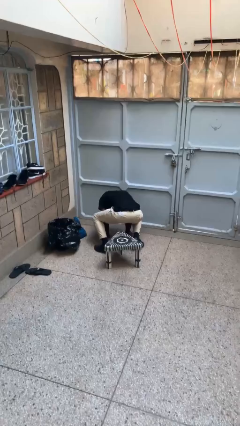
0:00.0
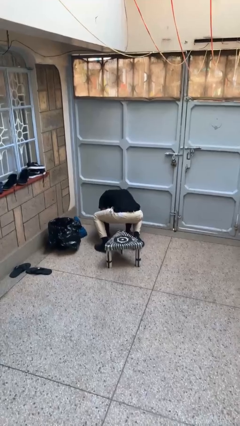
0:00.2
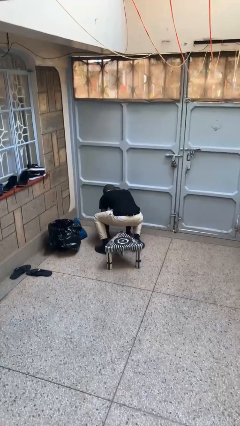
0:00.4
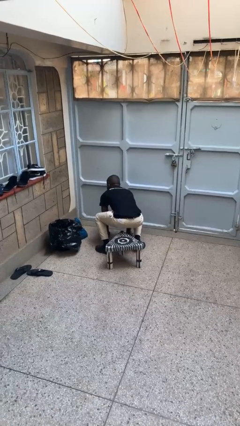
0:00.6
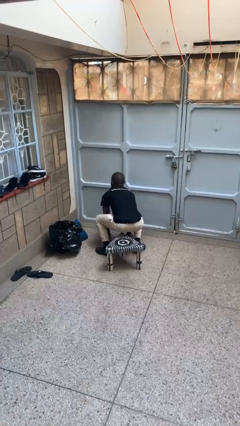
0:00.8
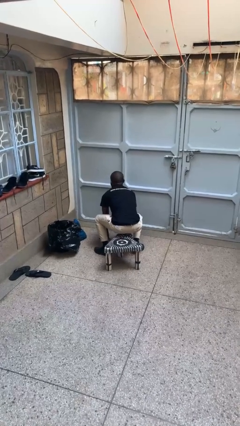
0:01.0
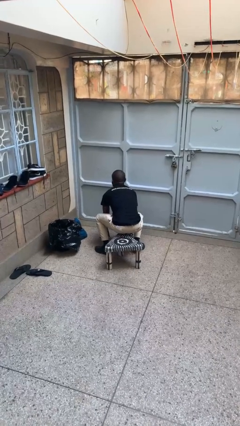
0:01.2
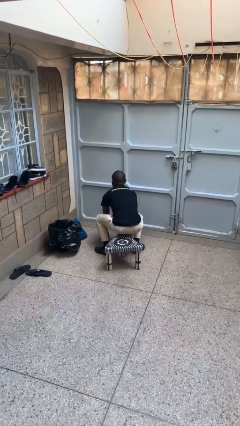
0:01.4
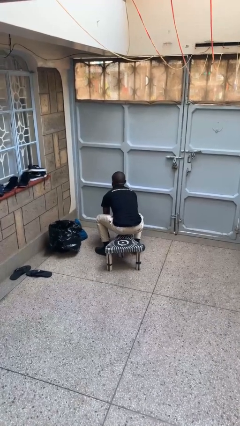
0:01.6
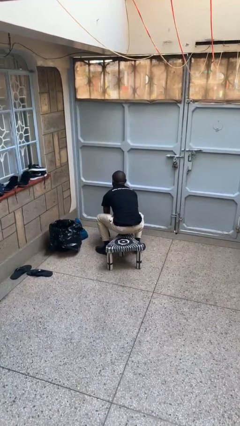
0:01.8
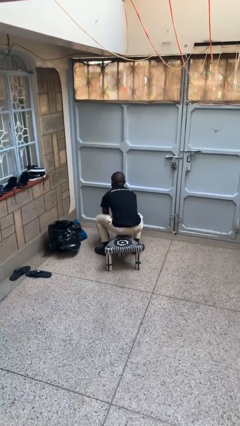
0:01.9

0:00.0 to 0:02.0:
person stands up from floor

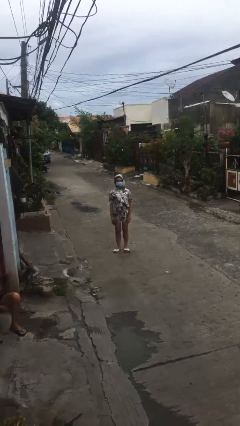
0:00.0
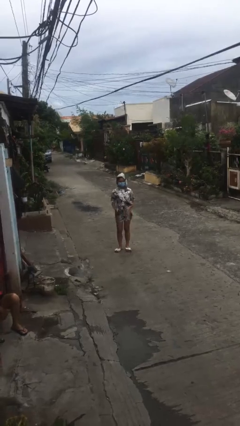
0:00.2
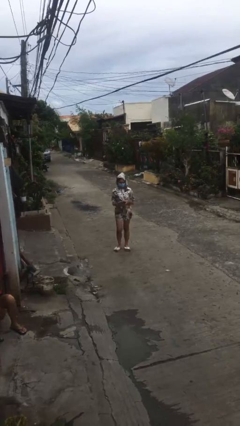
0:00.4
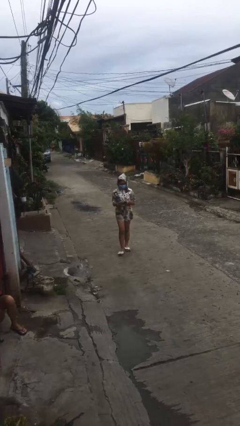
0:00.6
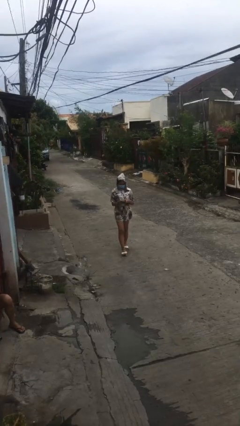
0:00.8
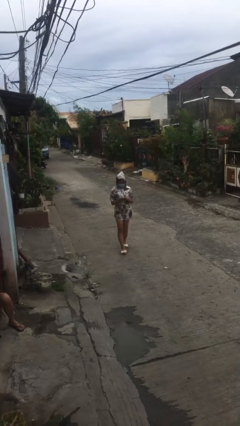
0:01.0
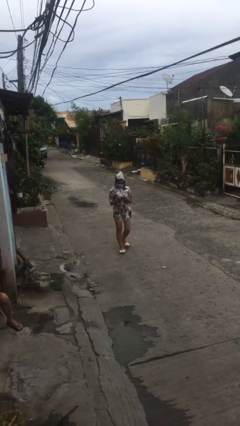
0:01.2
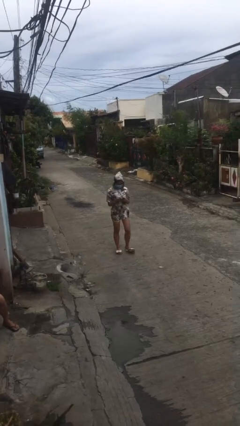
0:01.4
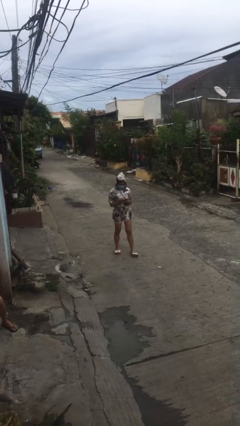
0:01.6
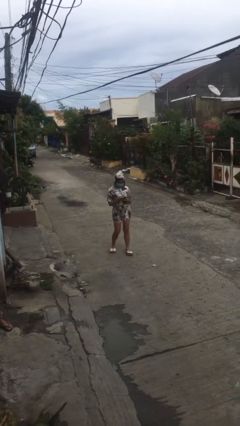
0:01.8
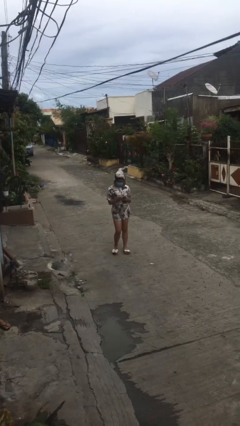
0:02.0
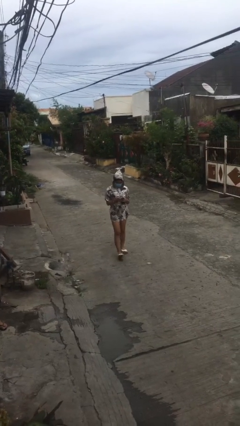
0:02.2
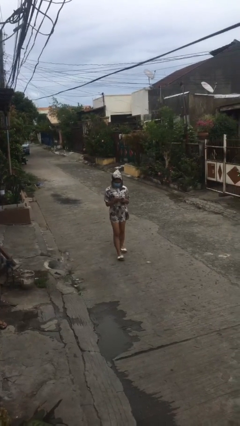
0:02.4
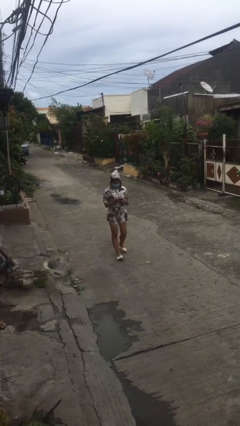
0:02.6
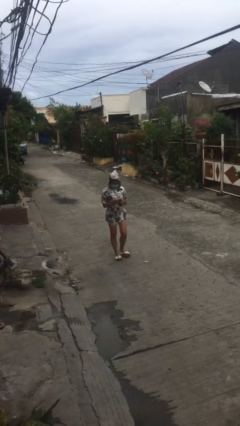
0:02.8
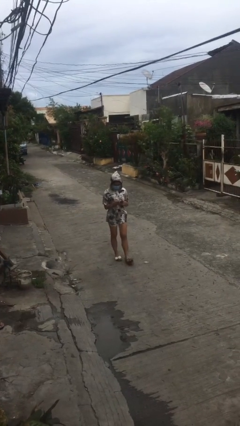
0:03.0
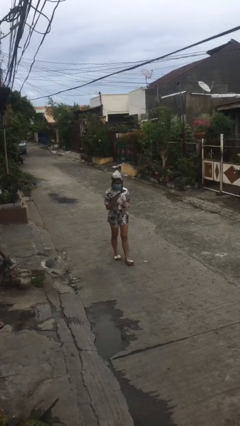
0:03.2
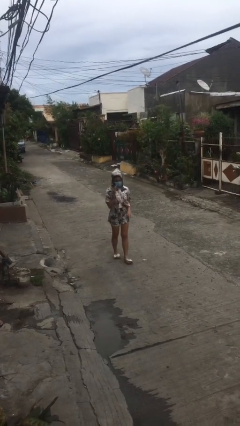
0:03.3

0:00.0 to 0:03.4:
person texts on phone

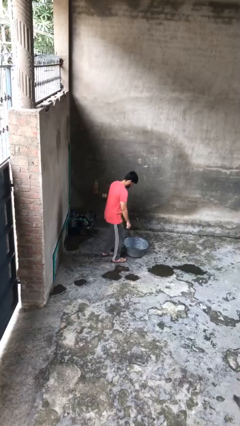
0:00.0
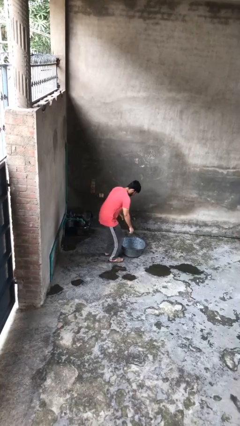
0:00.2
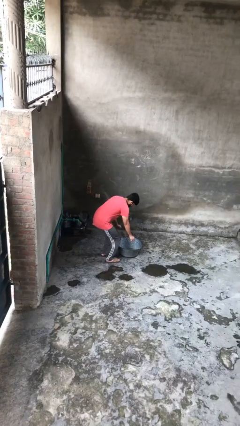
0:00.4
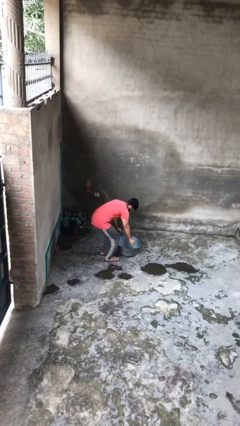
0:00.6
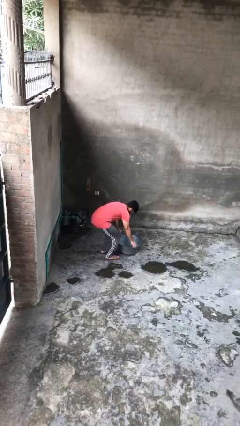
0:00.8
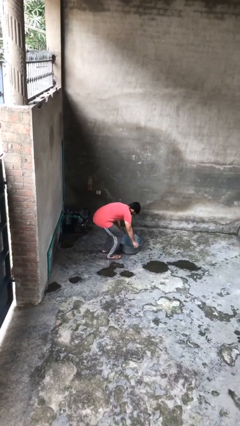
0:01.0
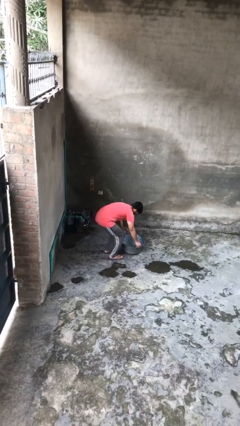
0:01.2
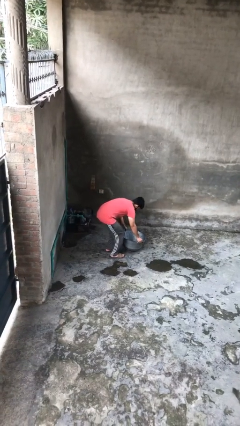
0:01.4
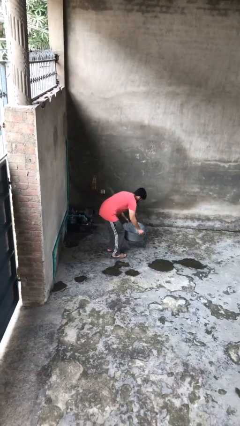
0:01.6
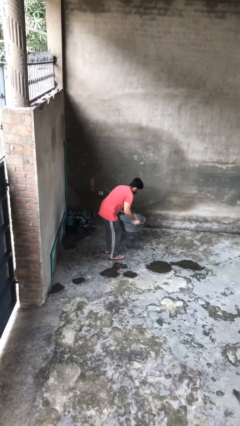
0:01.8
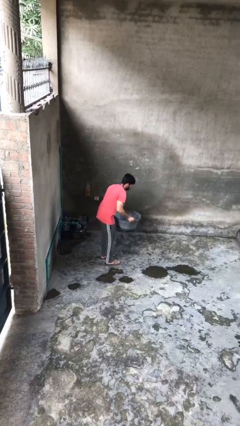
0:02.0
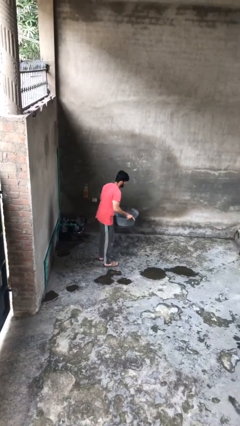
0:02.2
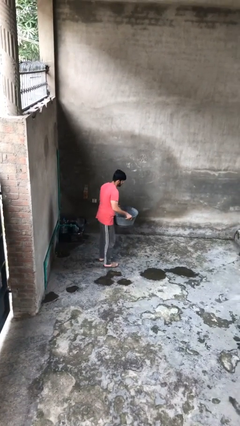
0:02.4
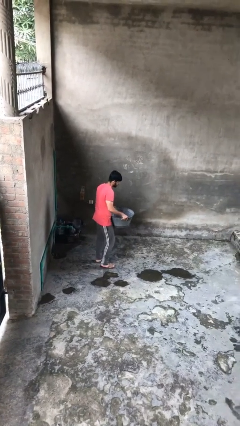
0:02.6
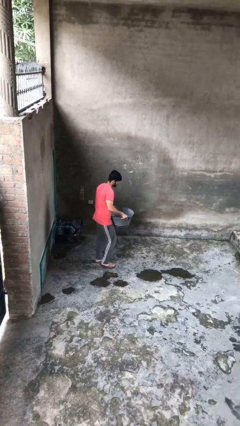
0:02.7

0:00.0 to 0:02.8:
person picks up object from floor

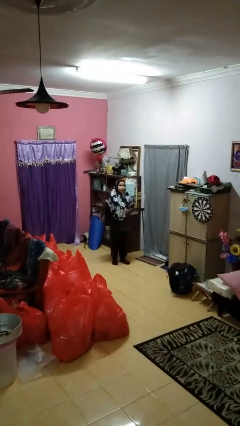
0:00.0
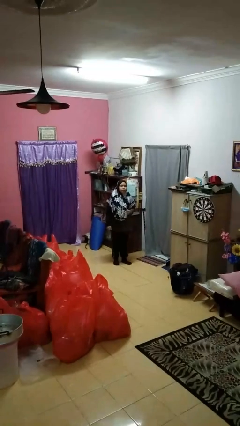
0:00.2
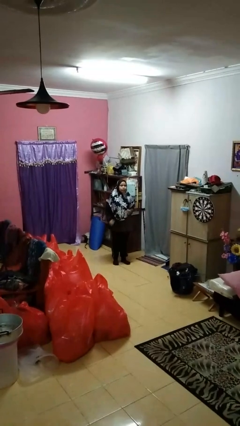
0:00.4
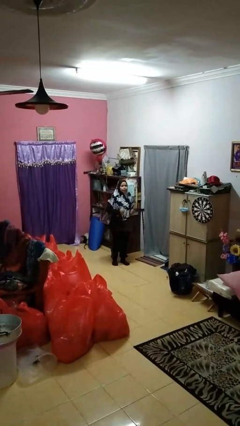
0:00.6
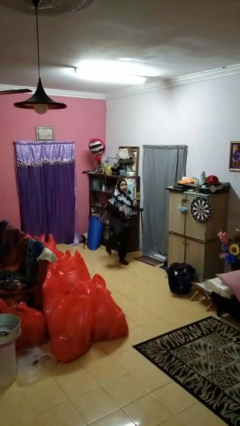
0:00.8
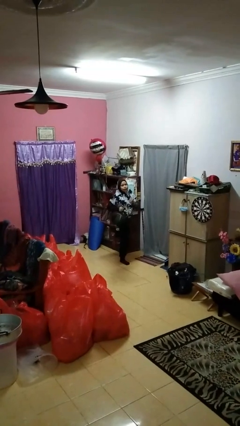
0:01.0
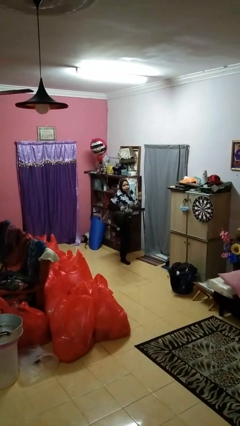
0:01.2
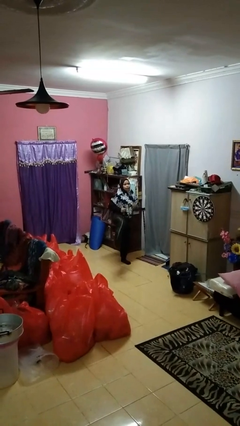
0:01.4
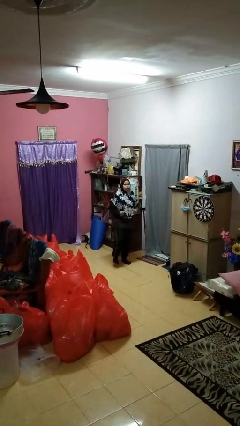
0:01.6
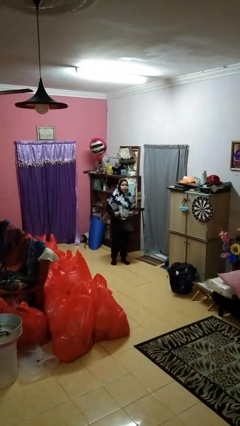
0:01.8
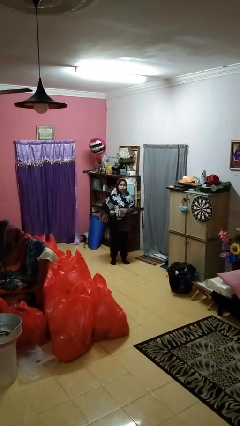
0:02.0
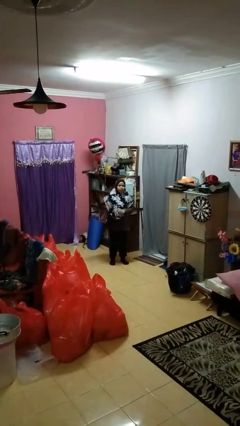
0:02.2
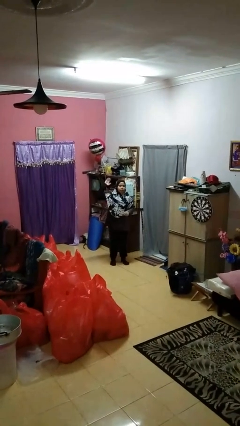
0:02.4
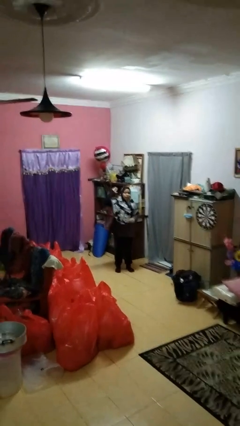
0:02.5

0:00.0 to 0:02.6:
person karate kicks

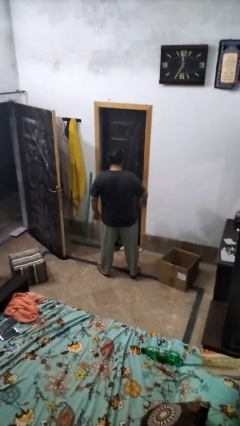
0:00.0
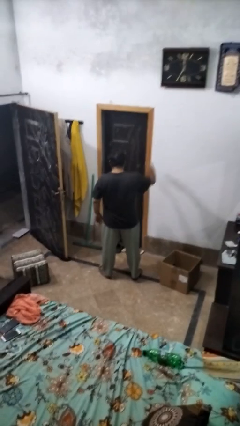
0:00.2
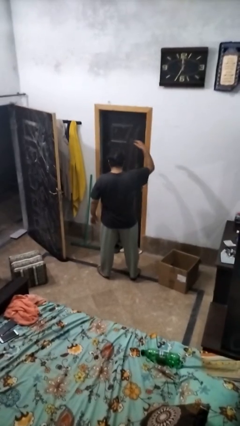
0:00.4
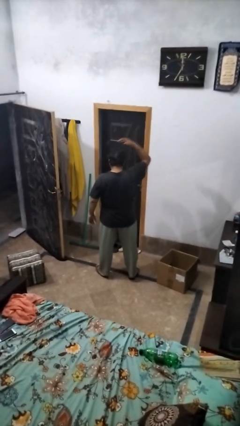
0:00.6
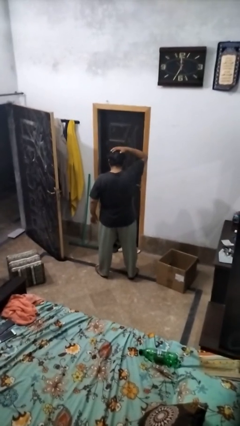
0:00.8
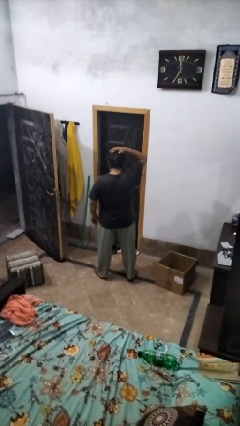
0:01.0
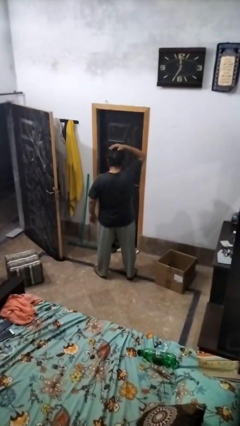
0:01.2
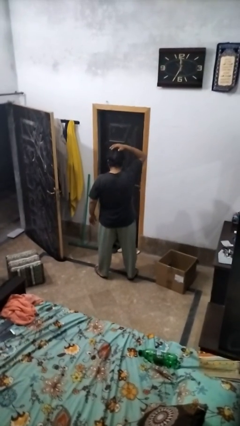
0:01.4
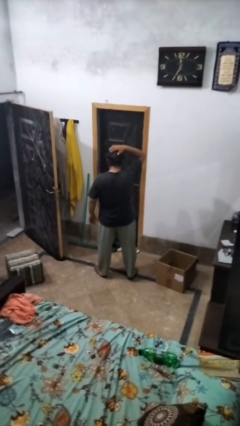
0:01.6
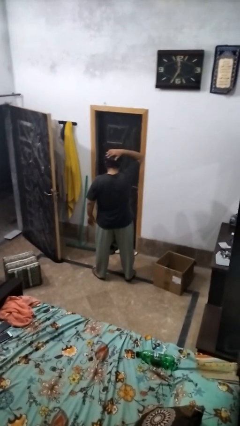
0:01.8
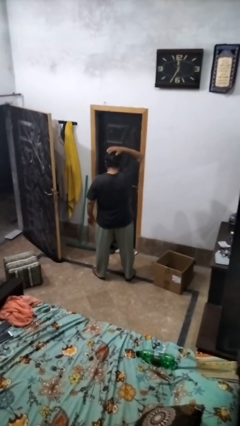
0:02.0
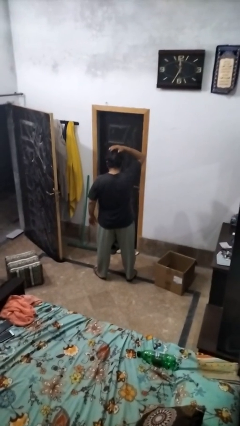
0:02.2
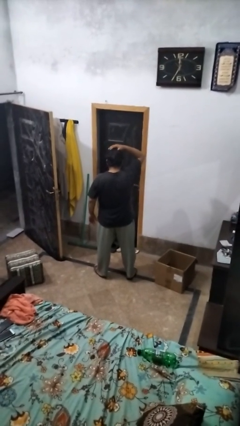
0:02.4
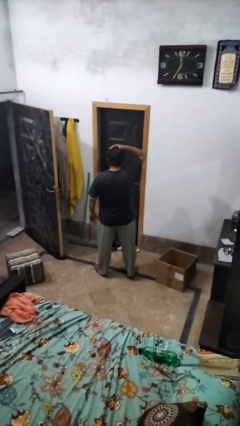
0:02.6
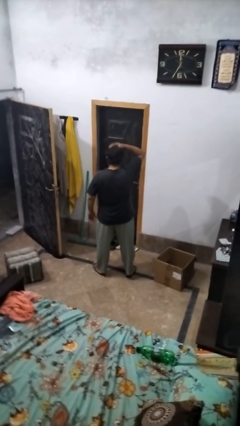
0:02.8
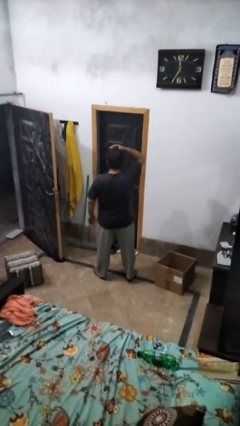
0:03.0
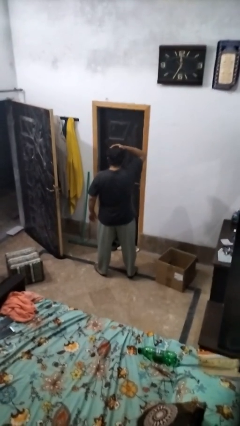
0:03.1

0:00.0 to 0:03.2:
person pats head

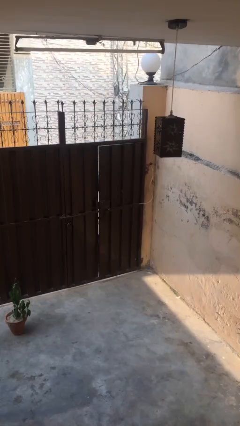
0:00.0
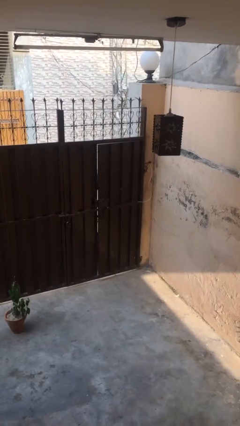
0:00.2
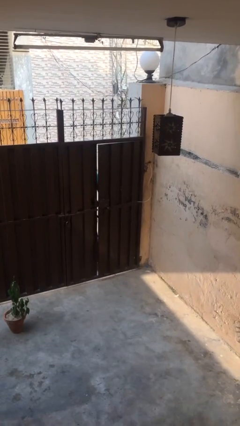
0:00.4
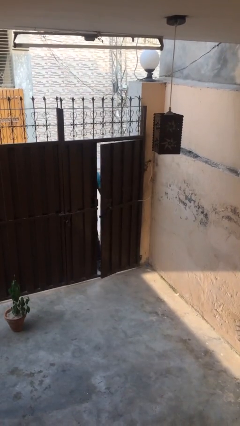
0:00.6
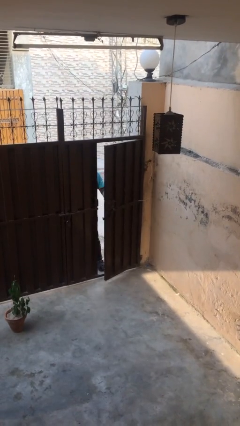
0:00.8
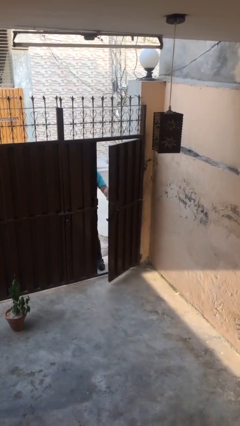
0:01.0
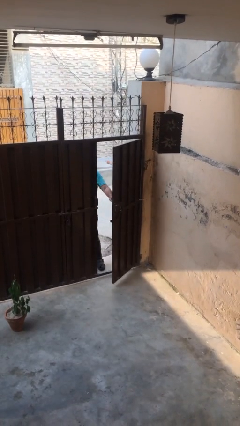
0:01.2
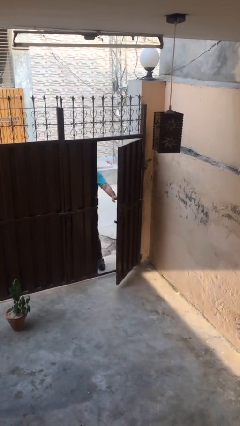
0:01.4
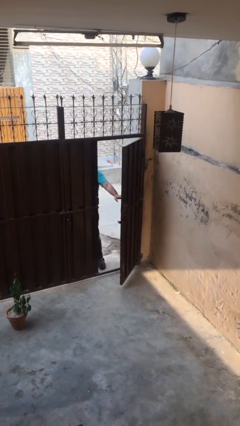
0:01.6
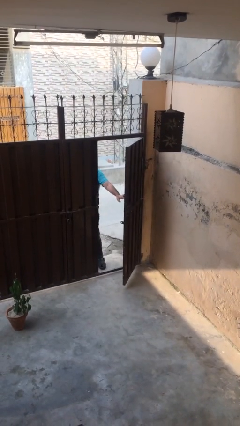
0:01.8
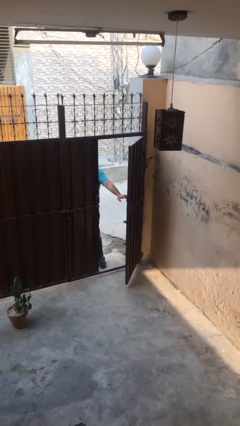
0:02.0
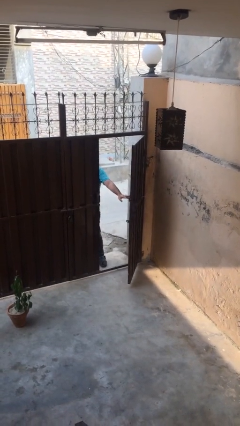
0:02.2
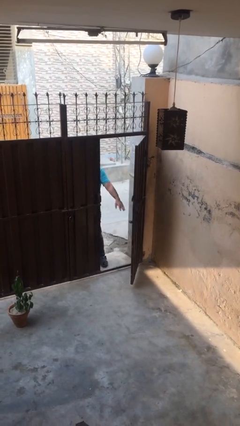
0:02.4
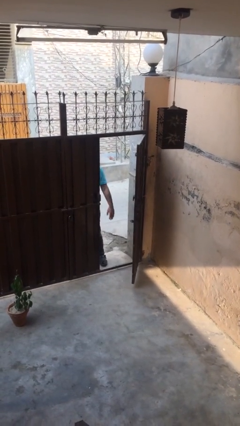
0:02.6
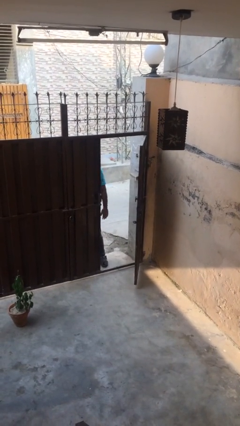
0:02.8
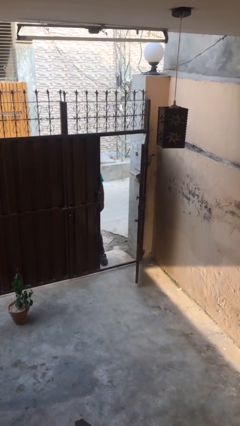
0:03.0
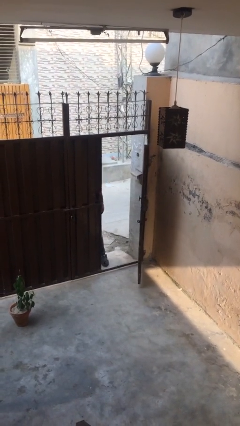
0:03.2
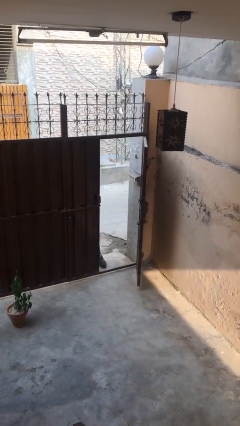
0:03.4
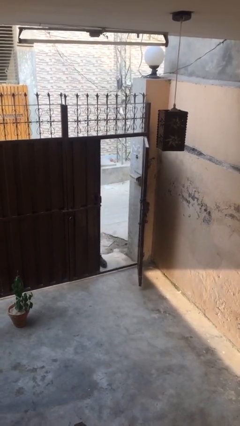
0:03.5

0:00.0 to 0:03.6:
person opens facility door
